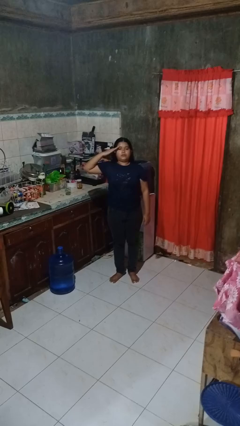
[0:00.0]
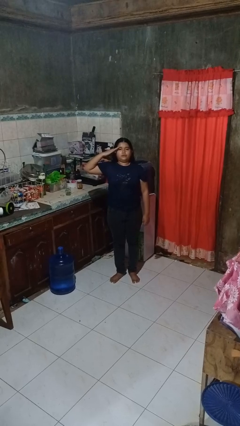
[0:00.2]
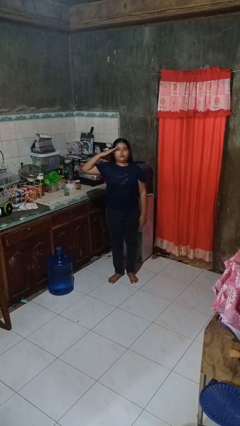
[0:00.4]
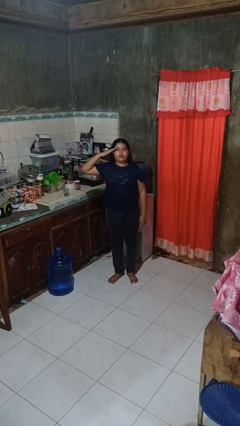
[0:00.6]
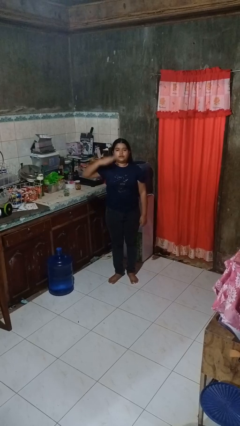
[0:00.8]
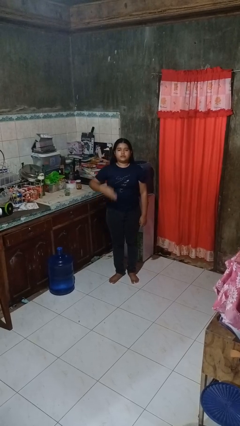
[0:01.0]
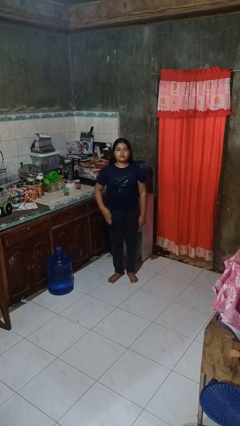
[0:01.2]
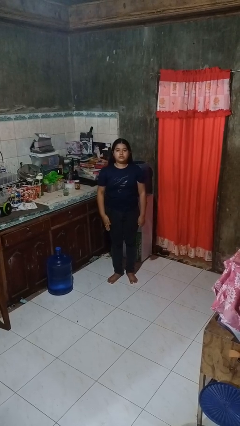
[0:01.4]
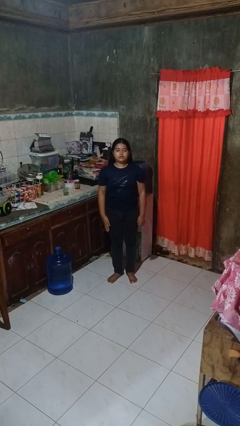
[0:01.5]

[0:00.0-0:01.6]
person salutes

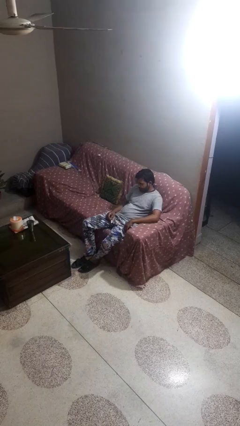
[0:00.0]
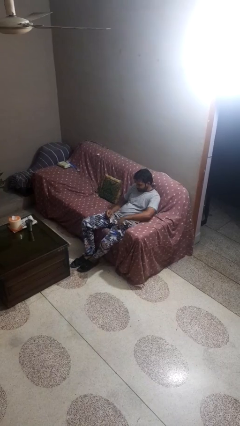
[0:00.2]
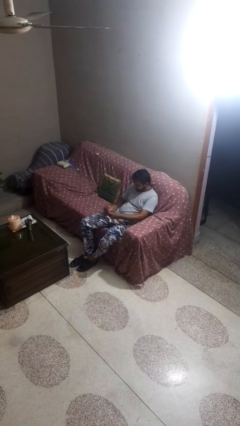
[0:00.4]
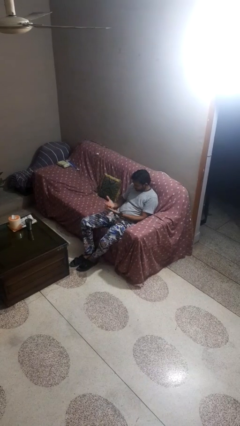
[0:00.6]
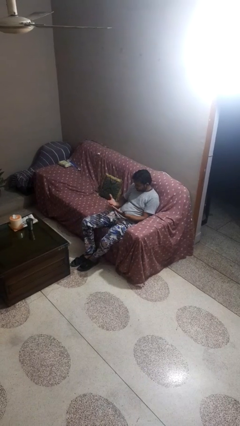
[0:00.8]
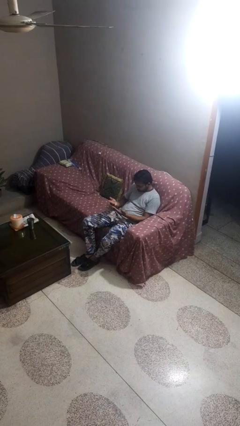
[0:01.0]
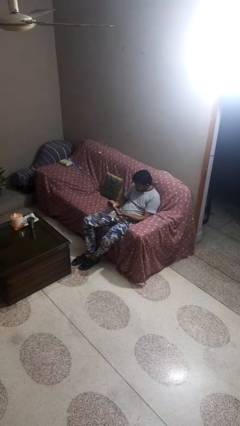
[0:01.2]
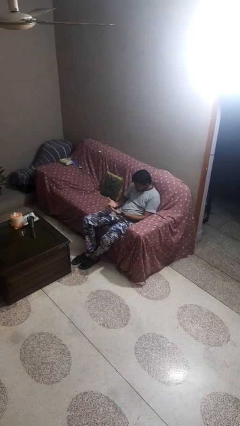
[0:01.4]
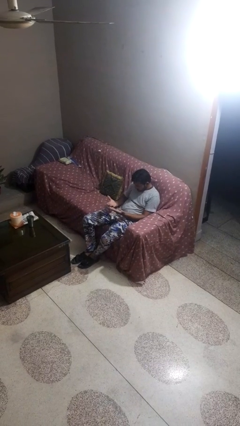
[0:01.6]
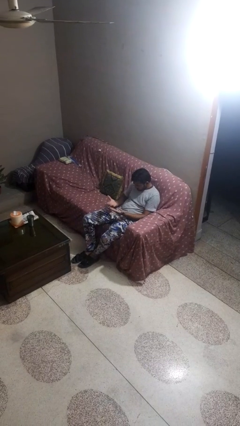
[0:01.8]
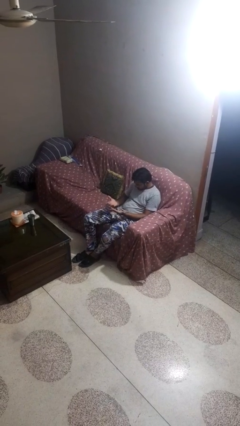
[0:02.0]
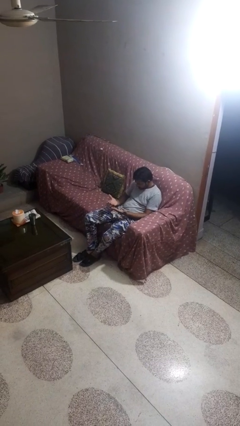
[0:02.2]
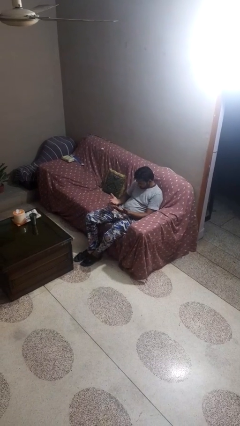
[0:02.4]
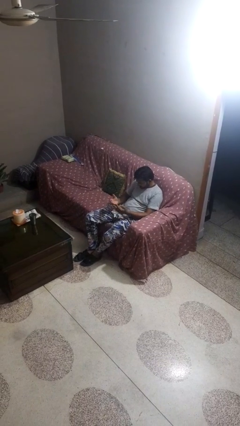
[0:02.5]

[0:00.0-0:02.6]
person looks at hands in lap

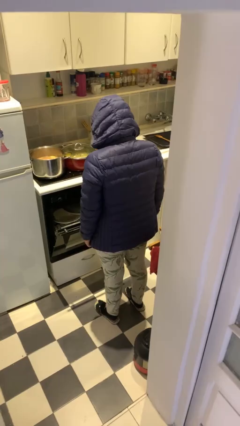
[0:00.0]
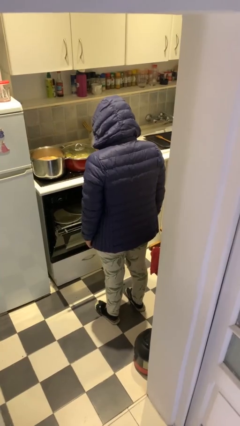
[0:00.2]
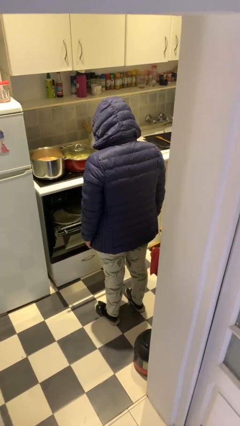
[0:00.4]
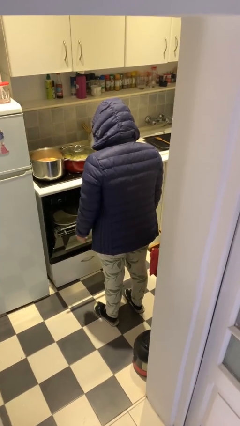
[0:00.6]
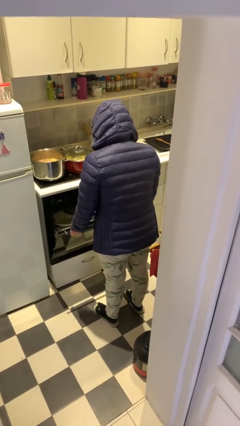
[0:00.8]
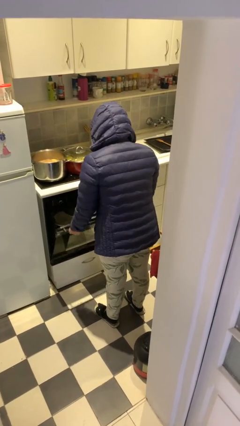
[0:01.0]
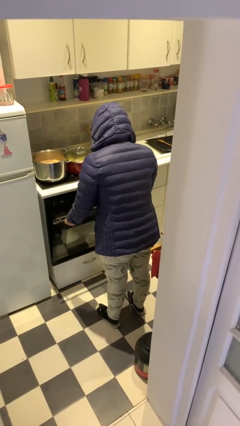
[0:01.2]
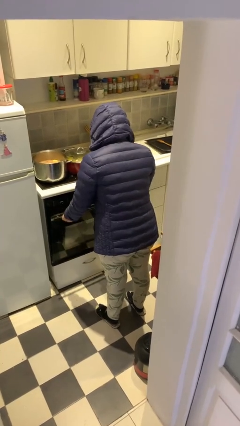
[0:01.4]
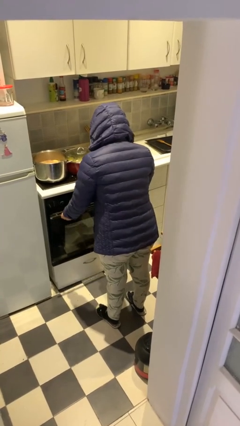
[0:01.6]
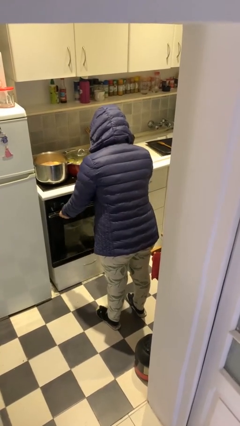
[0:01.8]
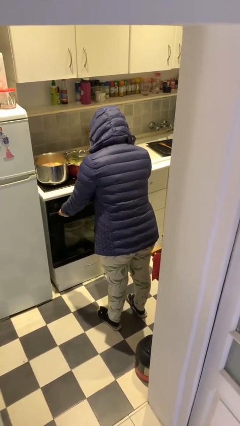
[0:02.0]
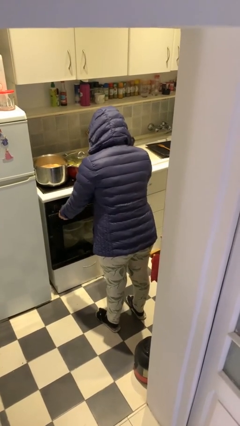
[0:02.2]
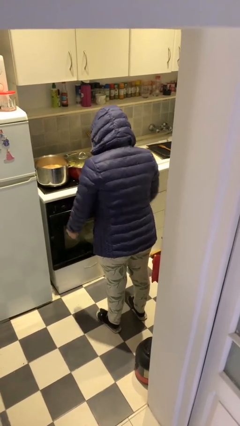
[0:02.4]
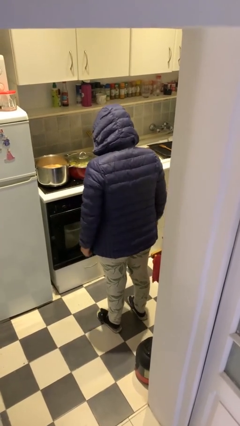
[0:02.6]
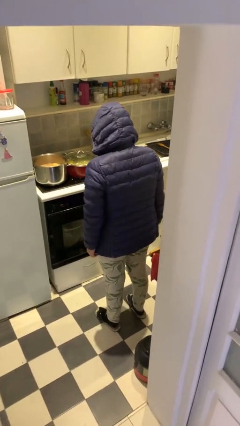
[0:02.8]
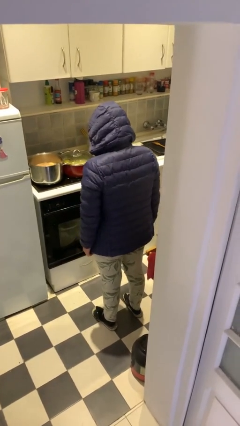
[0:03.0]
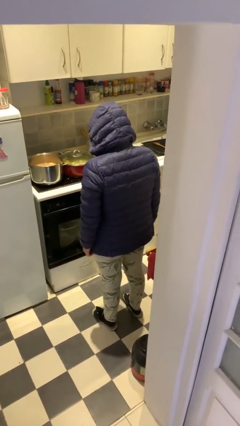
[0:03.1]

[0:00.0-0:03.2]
person closes dishwasher

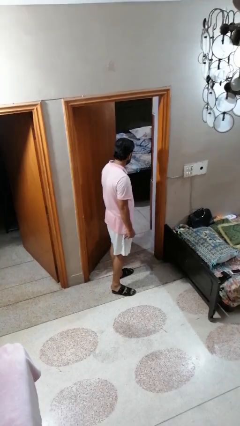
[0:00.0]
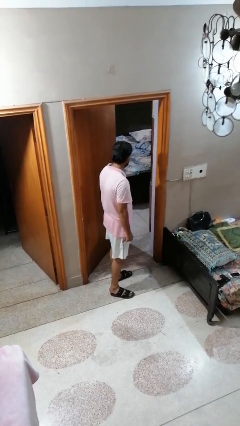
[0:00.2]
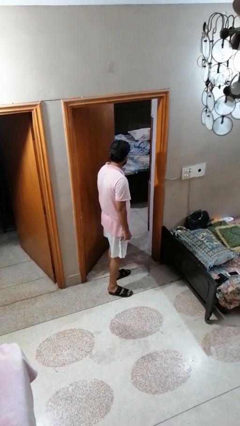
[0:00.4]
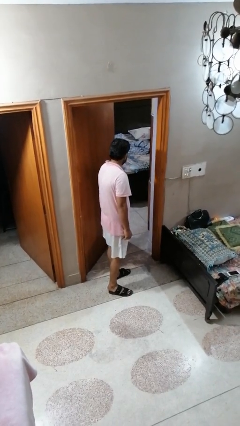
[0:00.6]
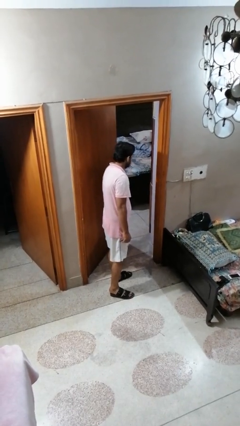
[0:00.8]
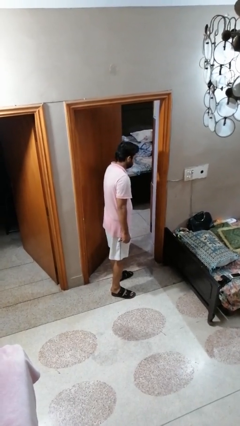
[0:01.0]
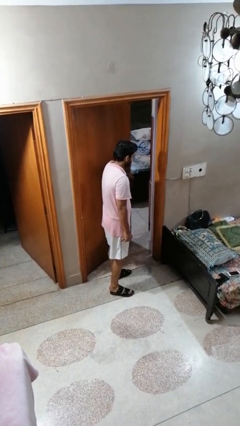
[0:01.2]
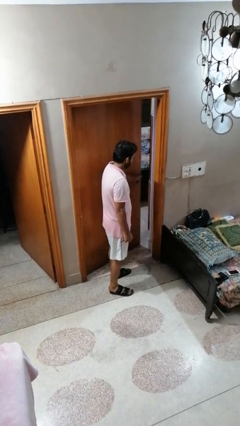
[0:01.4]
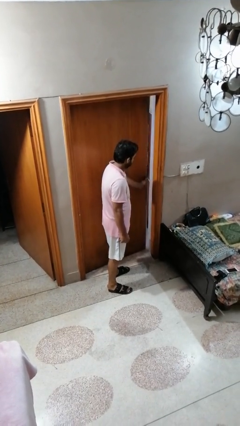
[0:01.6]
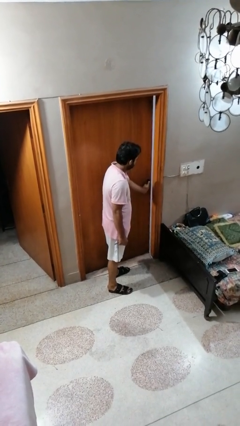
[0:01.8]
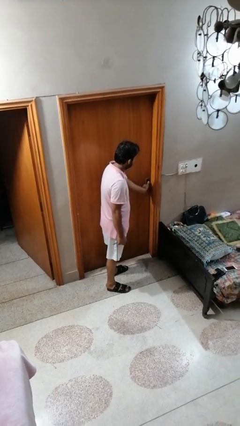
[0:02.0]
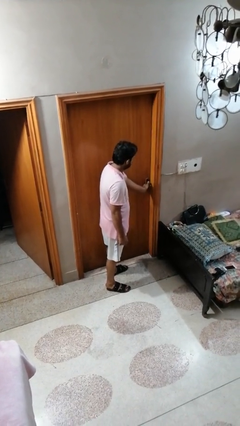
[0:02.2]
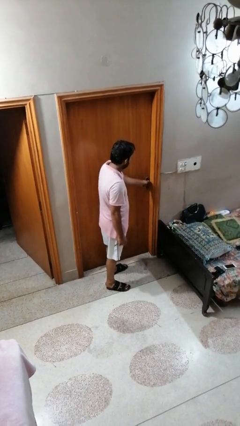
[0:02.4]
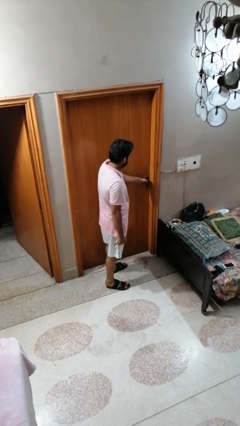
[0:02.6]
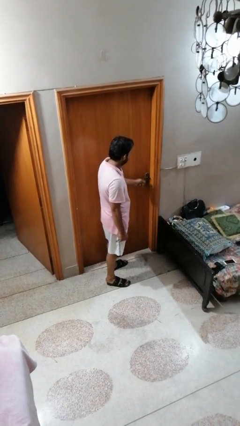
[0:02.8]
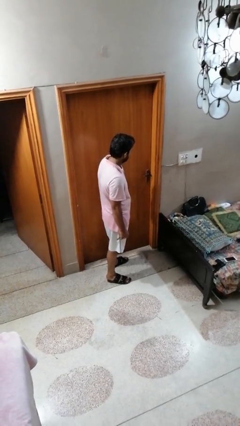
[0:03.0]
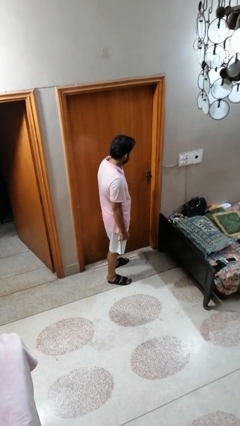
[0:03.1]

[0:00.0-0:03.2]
person closes facility door

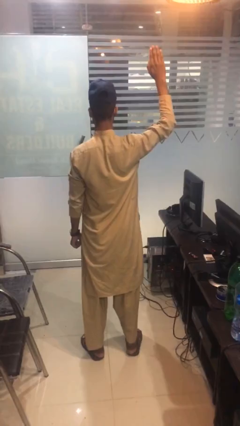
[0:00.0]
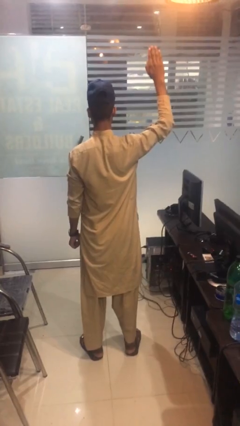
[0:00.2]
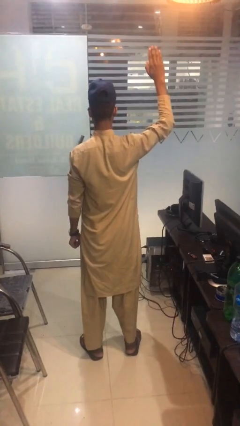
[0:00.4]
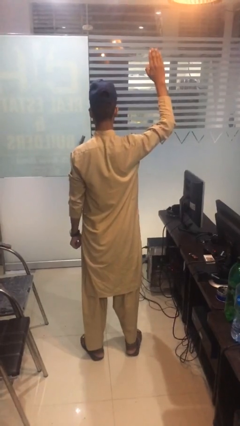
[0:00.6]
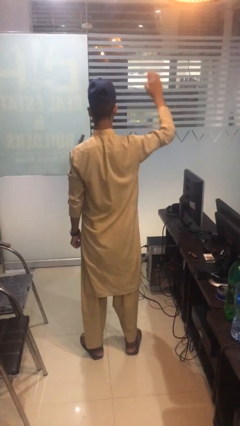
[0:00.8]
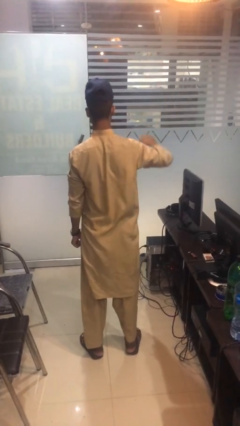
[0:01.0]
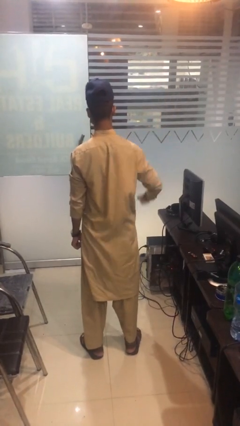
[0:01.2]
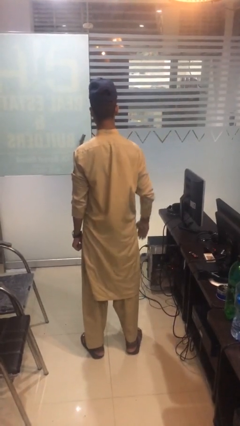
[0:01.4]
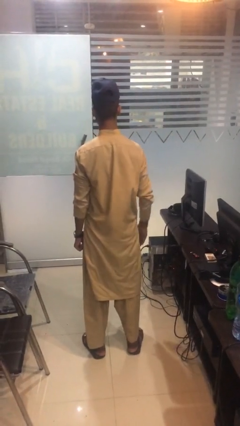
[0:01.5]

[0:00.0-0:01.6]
person gestures lower hand

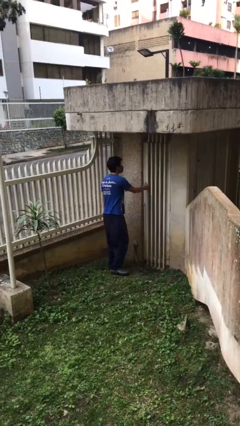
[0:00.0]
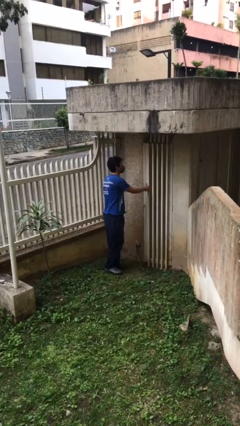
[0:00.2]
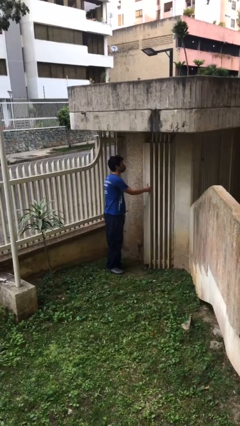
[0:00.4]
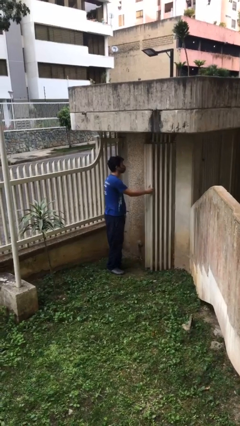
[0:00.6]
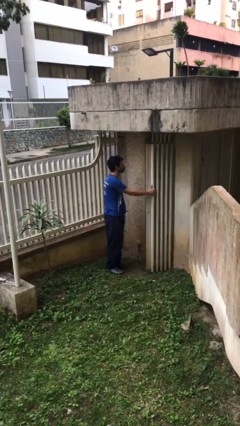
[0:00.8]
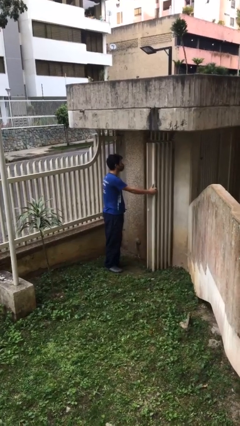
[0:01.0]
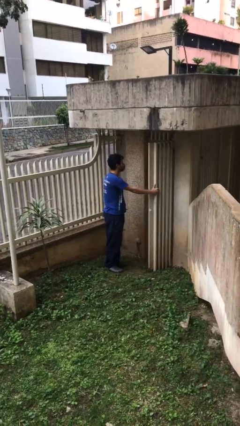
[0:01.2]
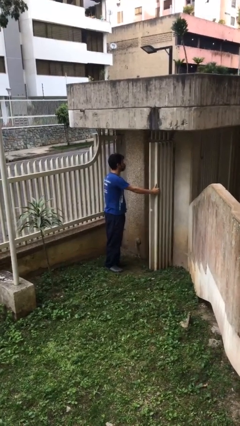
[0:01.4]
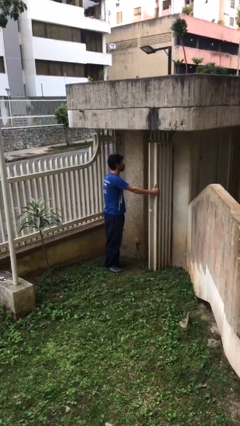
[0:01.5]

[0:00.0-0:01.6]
person opens facility door

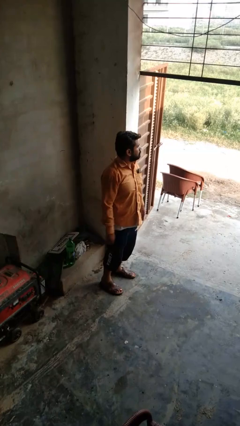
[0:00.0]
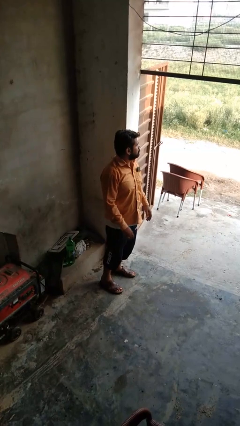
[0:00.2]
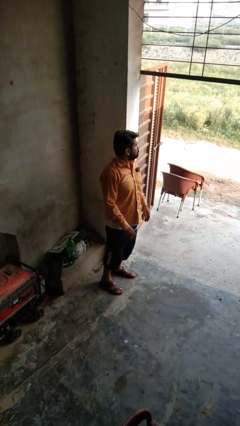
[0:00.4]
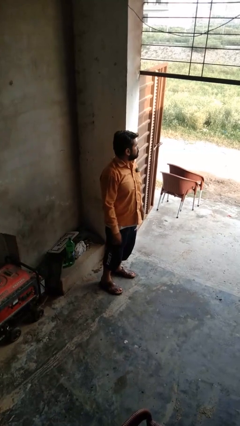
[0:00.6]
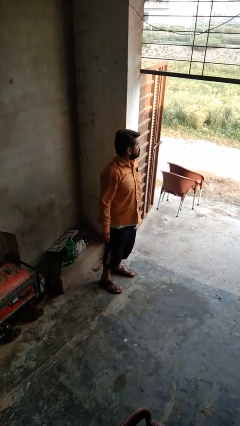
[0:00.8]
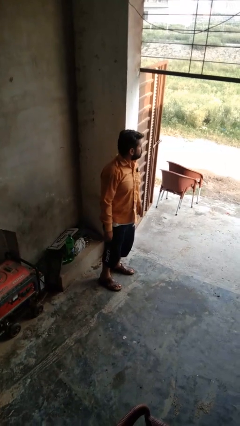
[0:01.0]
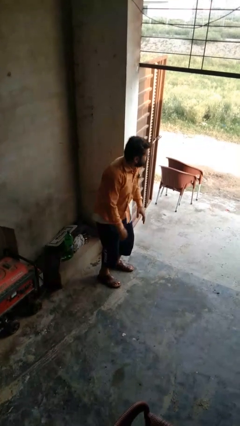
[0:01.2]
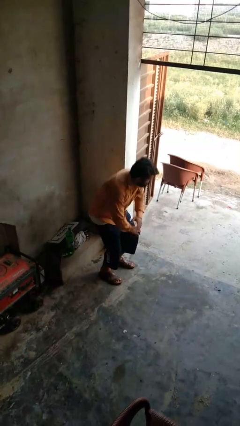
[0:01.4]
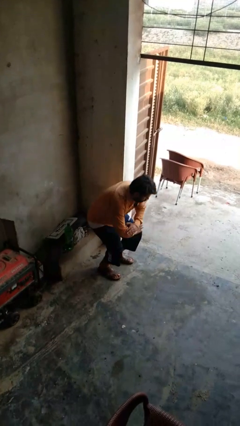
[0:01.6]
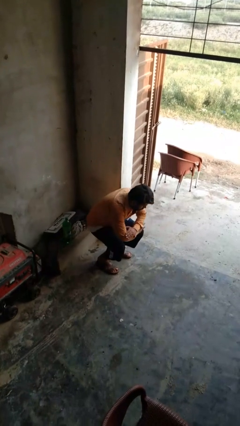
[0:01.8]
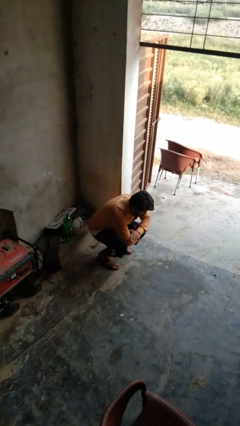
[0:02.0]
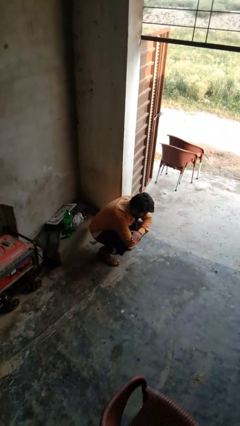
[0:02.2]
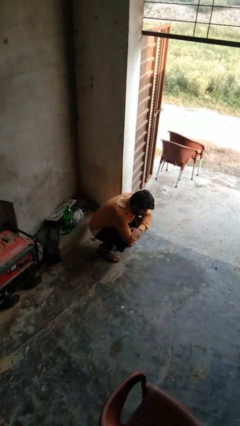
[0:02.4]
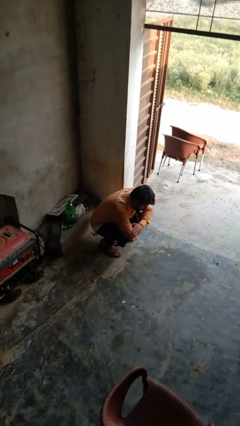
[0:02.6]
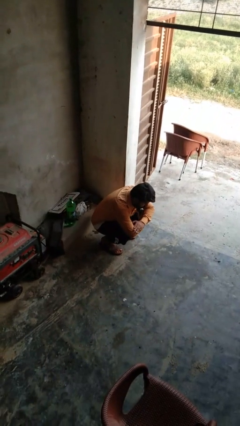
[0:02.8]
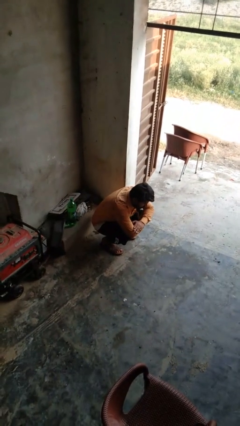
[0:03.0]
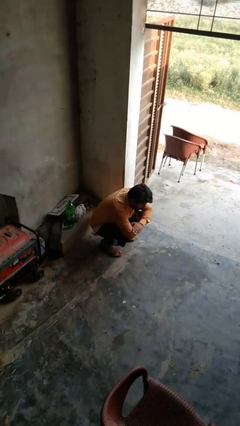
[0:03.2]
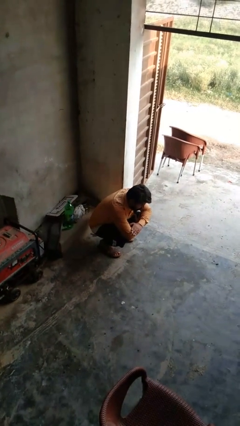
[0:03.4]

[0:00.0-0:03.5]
person squats
